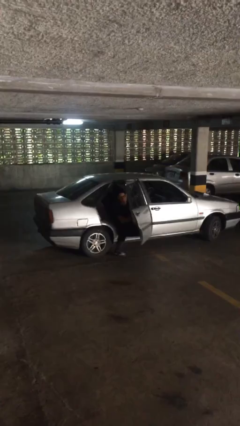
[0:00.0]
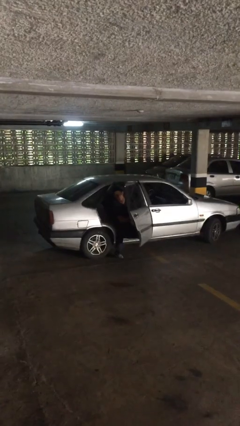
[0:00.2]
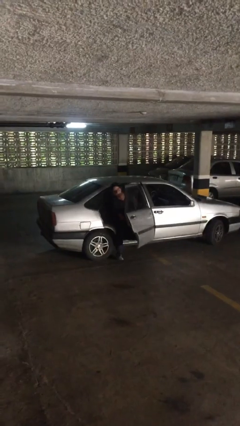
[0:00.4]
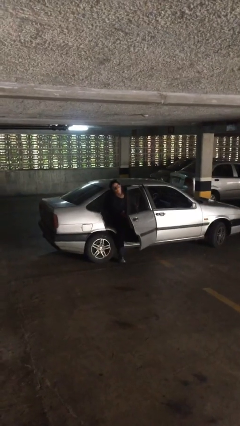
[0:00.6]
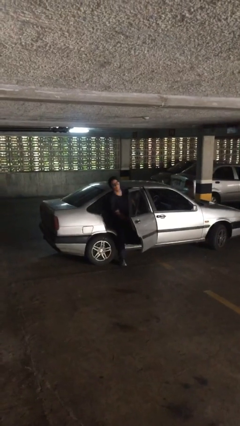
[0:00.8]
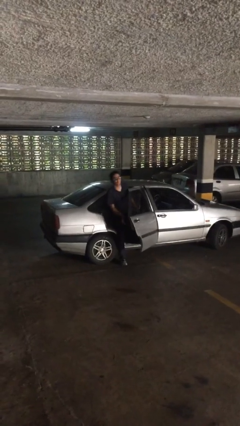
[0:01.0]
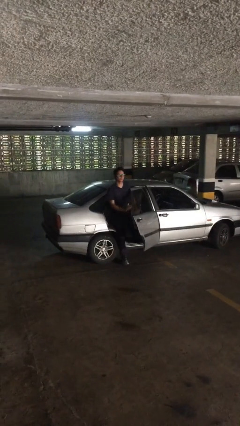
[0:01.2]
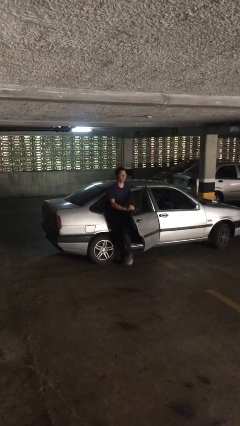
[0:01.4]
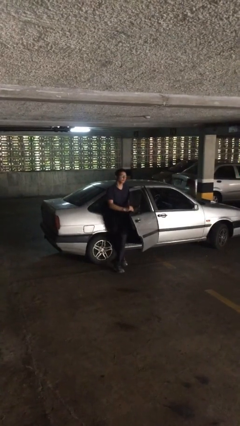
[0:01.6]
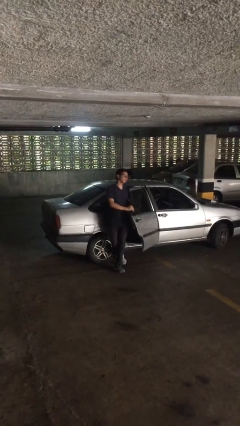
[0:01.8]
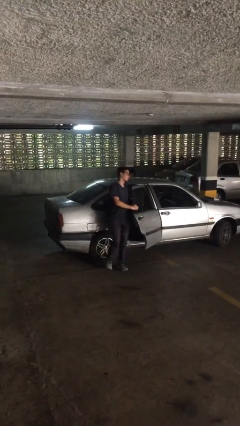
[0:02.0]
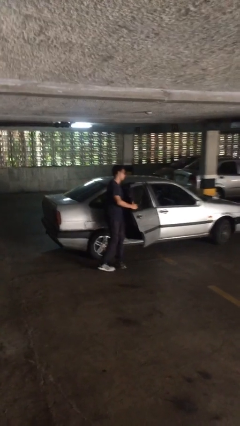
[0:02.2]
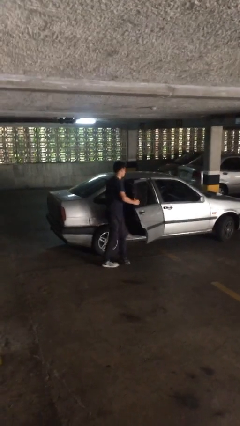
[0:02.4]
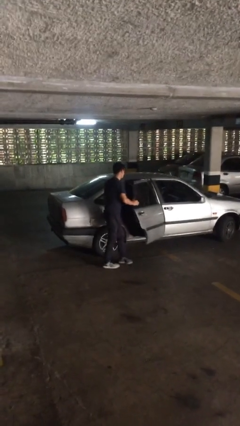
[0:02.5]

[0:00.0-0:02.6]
person exits car

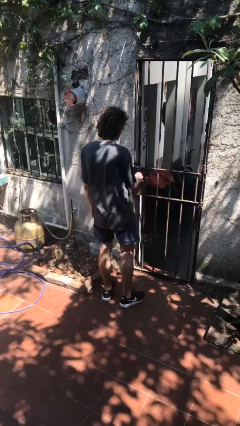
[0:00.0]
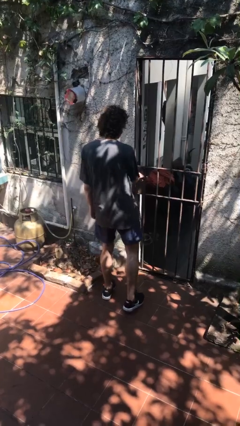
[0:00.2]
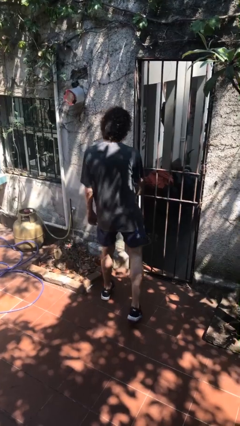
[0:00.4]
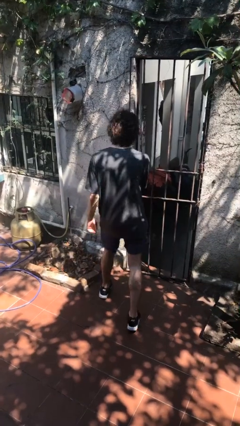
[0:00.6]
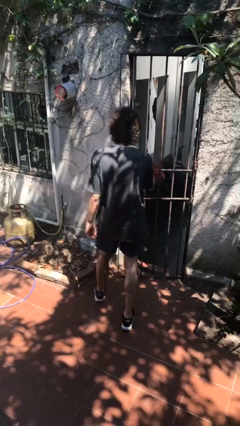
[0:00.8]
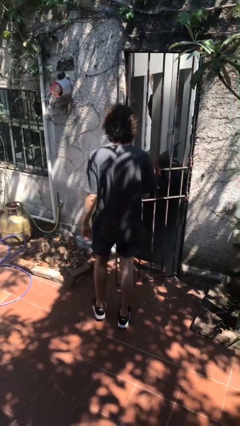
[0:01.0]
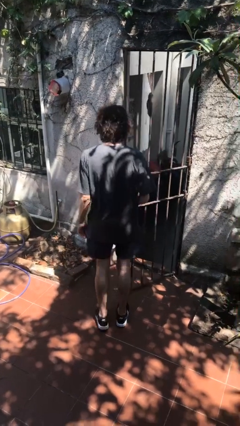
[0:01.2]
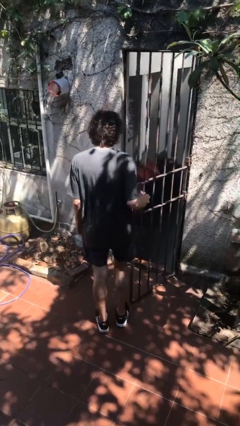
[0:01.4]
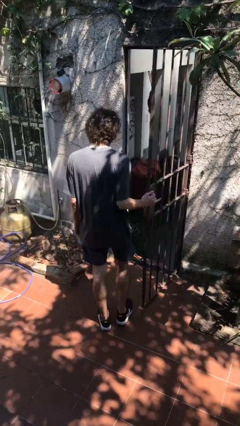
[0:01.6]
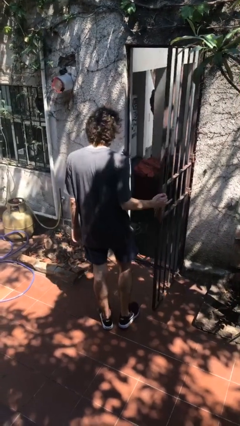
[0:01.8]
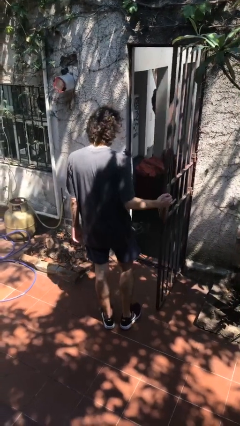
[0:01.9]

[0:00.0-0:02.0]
person opens facility door

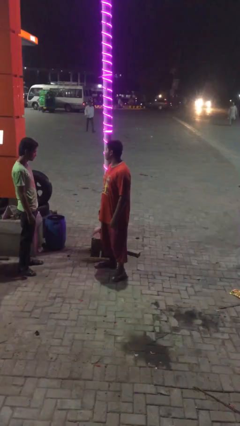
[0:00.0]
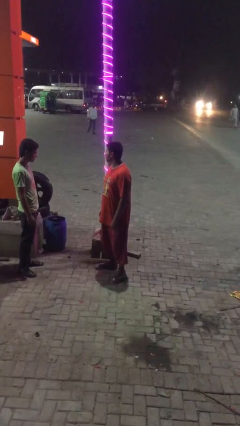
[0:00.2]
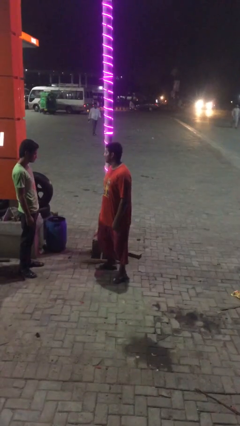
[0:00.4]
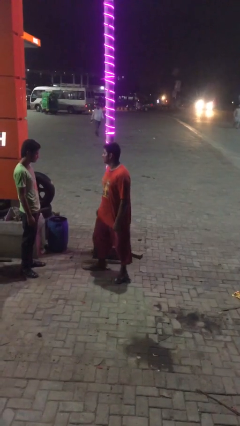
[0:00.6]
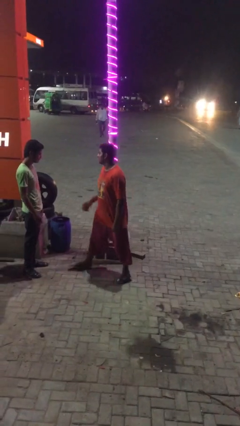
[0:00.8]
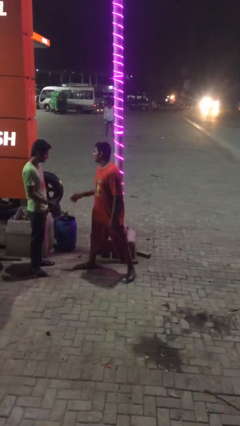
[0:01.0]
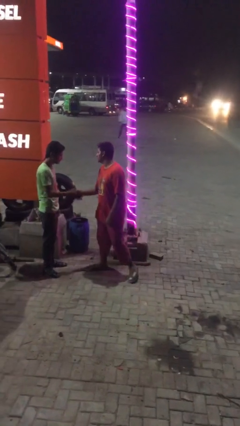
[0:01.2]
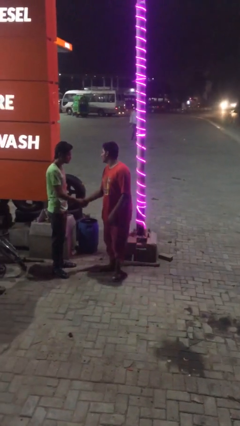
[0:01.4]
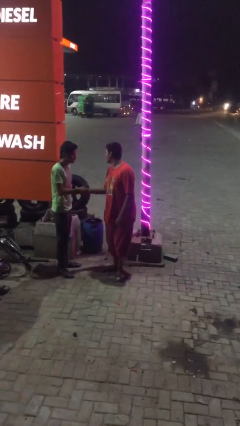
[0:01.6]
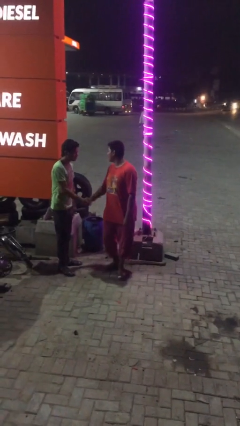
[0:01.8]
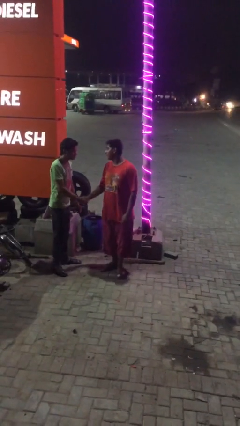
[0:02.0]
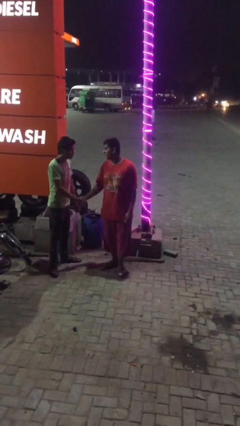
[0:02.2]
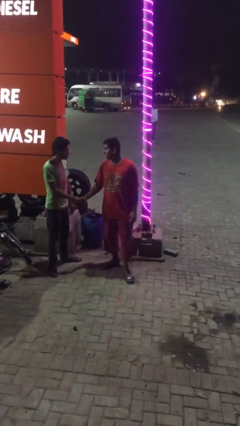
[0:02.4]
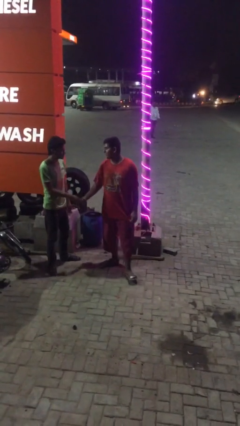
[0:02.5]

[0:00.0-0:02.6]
person shakes hand

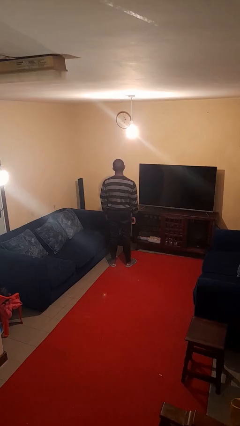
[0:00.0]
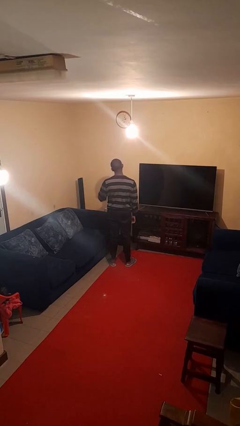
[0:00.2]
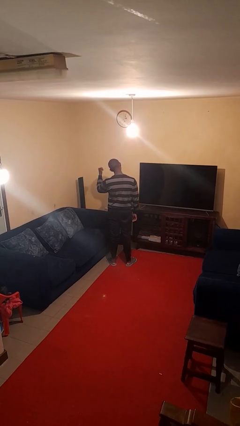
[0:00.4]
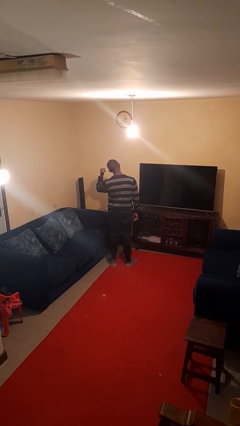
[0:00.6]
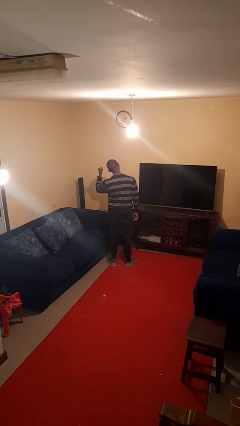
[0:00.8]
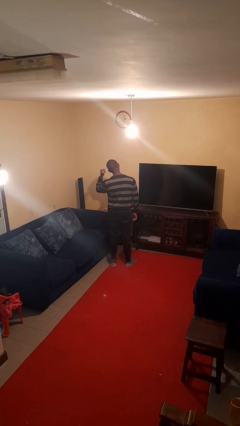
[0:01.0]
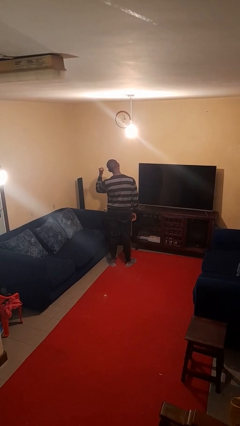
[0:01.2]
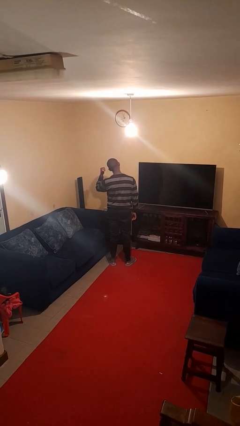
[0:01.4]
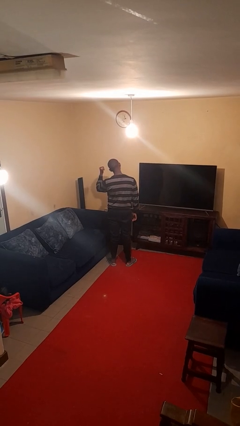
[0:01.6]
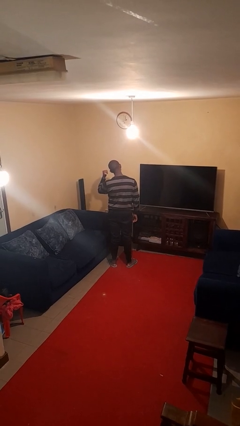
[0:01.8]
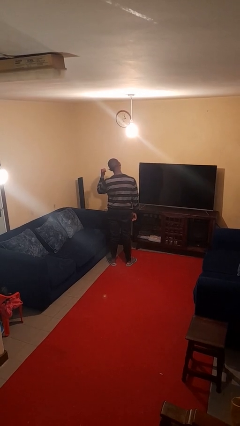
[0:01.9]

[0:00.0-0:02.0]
person gestures behind me

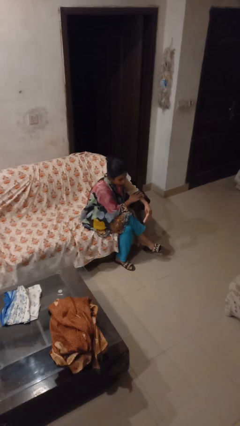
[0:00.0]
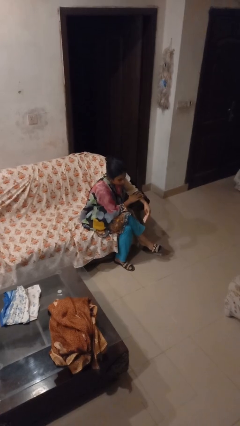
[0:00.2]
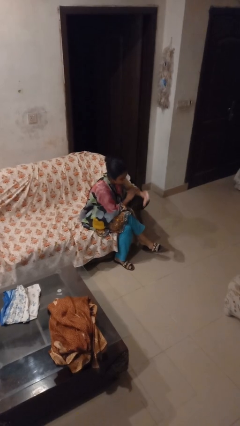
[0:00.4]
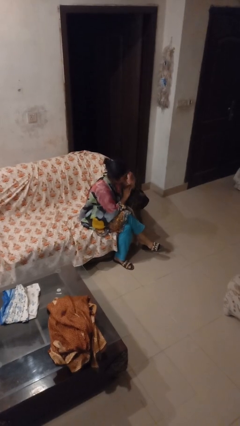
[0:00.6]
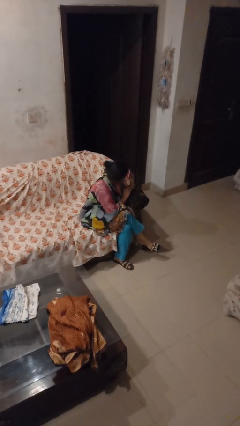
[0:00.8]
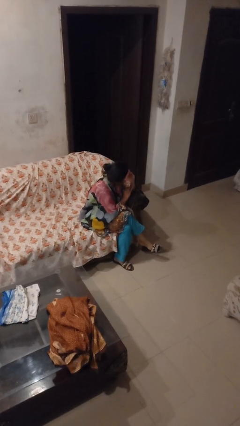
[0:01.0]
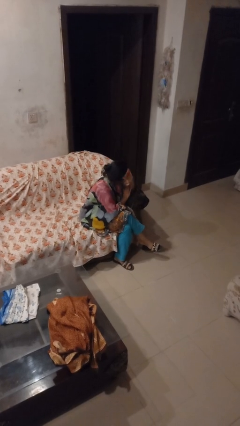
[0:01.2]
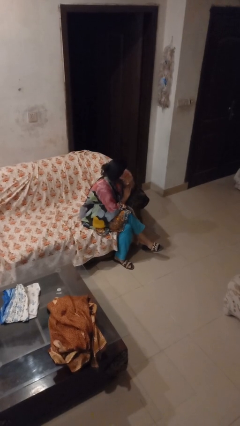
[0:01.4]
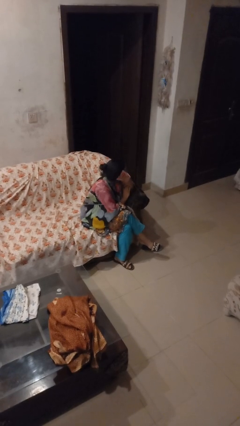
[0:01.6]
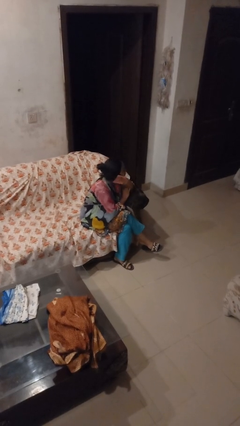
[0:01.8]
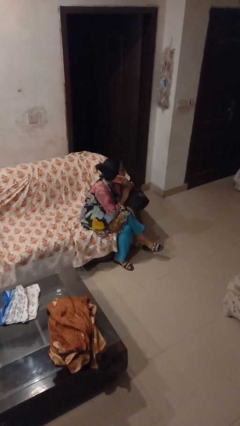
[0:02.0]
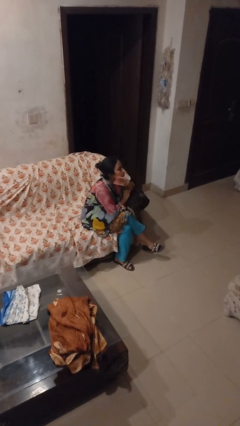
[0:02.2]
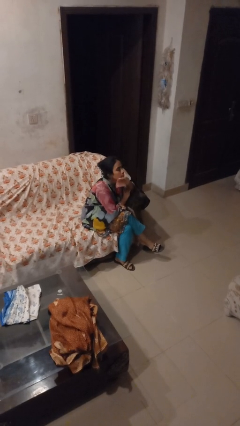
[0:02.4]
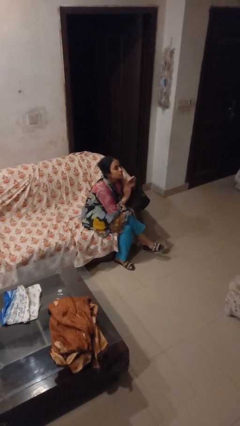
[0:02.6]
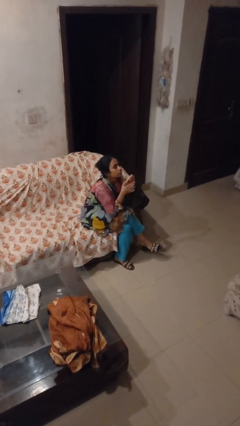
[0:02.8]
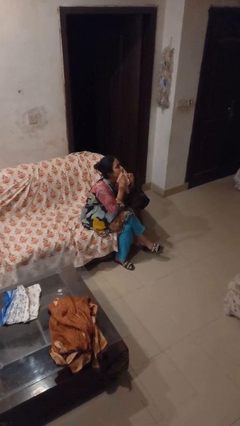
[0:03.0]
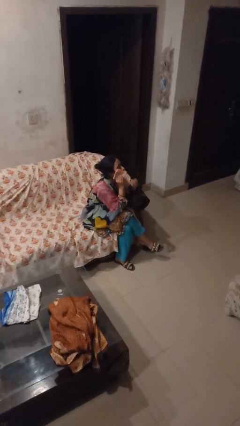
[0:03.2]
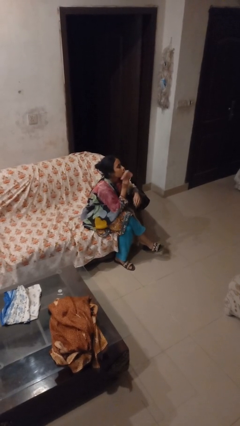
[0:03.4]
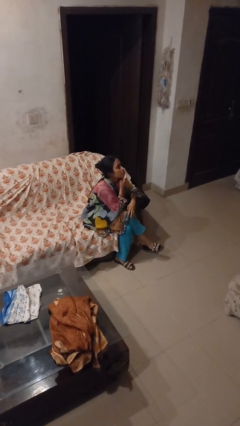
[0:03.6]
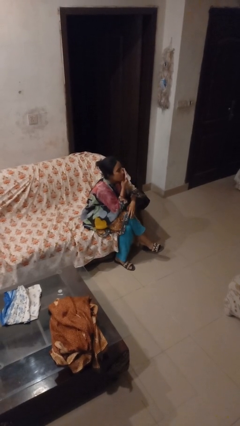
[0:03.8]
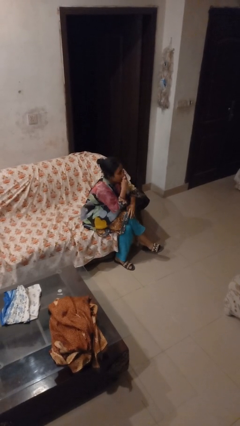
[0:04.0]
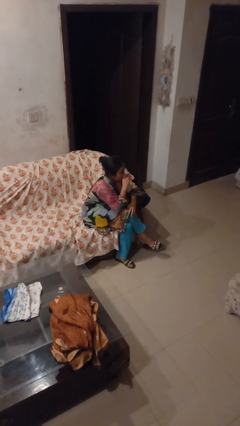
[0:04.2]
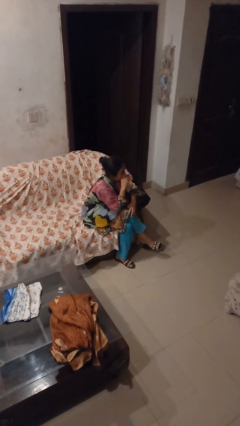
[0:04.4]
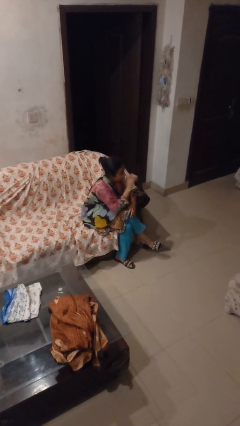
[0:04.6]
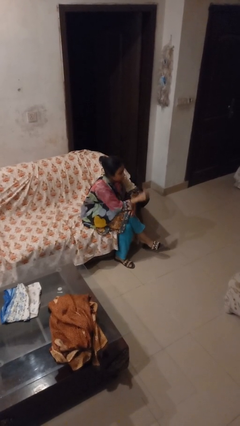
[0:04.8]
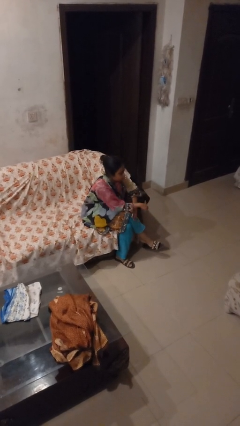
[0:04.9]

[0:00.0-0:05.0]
person wipes mouth with napkin

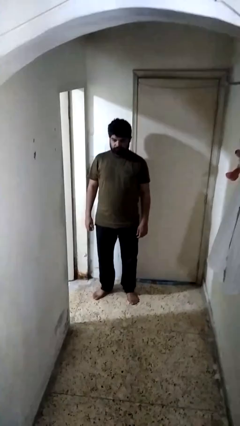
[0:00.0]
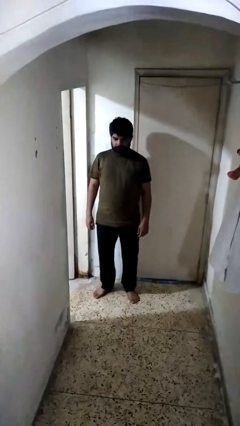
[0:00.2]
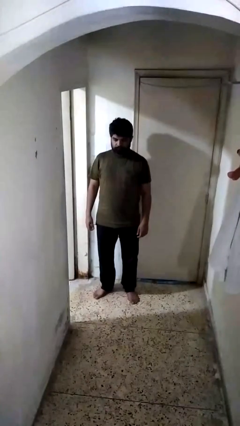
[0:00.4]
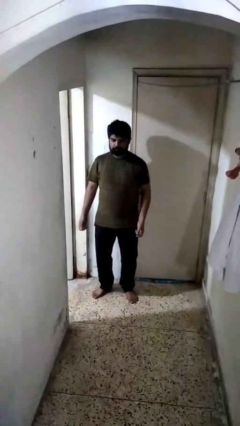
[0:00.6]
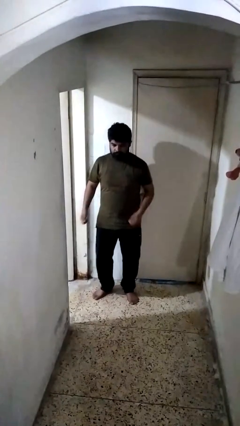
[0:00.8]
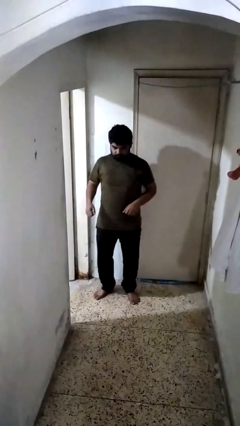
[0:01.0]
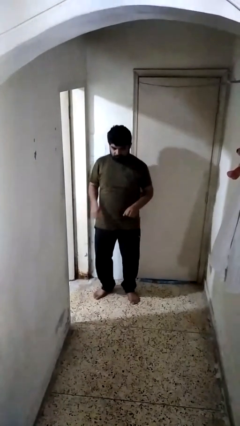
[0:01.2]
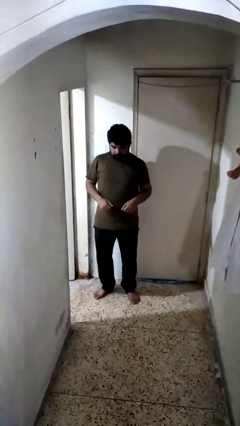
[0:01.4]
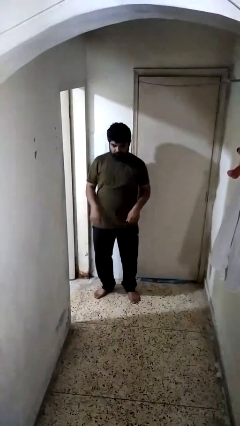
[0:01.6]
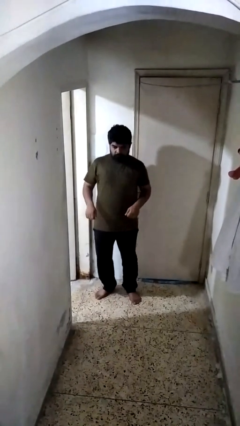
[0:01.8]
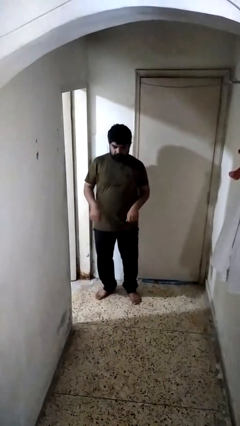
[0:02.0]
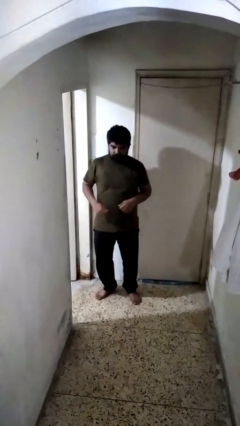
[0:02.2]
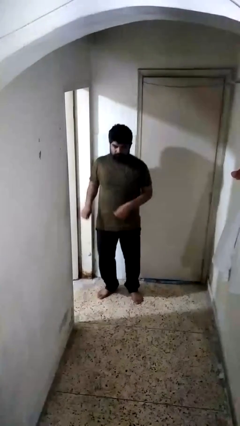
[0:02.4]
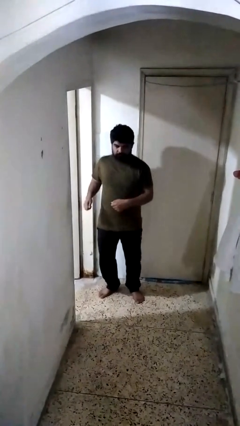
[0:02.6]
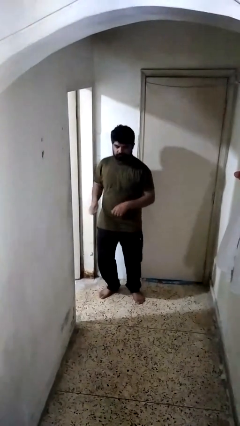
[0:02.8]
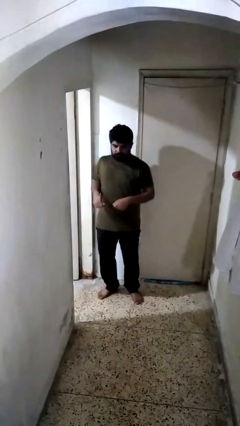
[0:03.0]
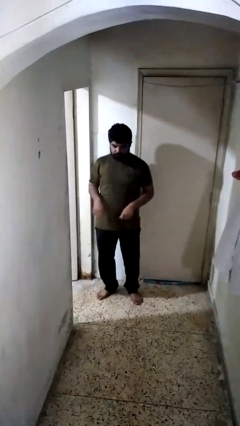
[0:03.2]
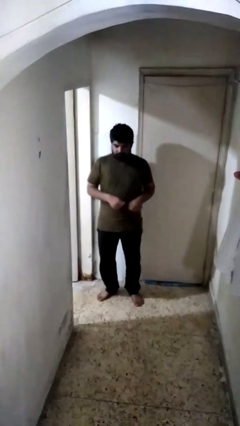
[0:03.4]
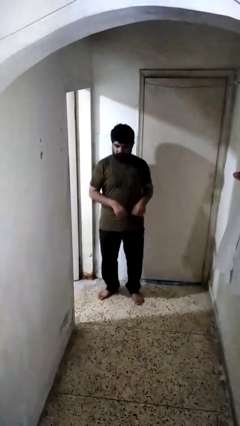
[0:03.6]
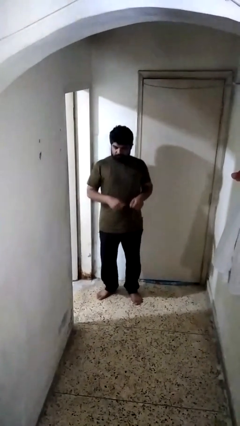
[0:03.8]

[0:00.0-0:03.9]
person dances in place
